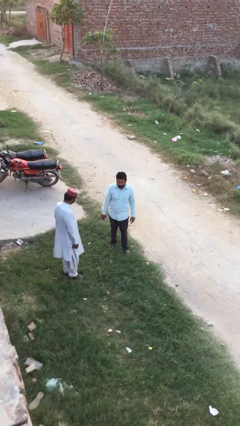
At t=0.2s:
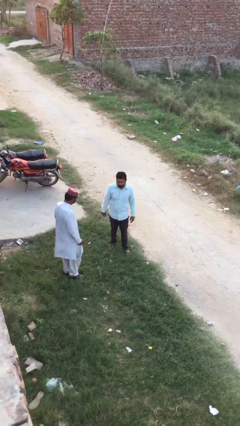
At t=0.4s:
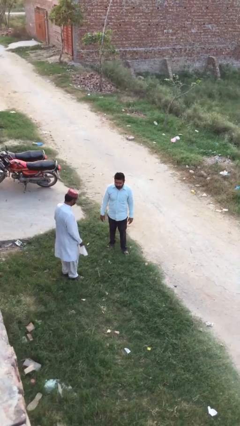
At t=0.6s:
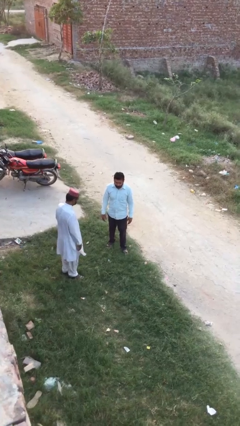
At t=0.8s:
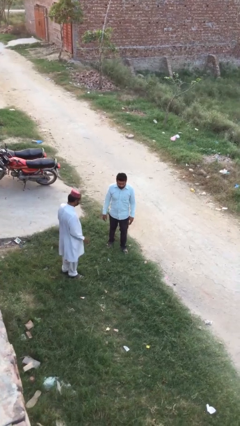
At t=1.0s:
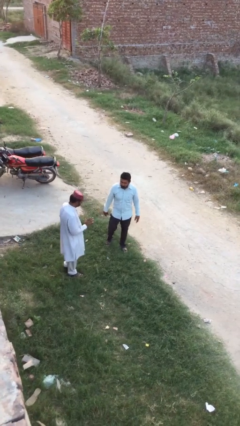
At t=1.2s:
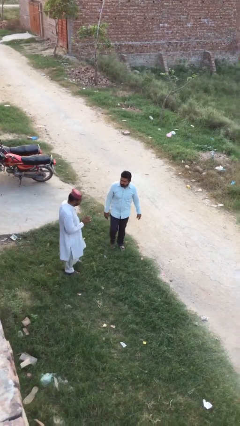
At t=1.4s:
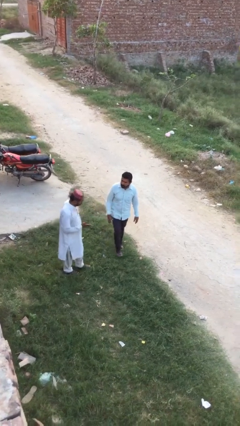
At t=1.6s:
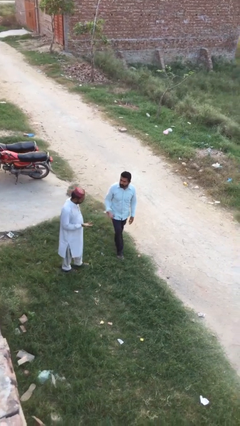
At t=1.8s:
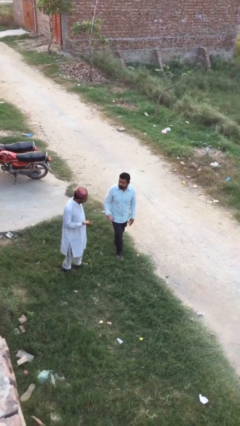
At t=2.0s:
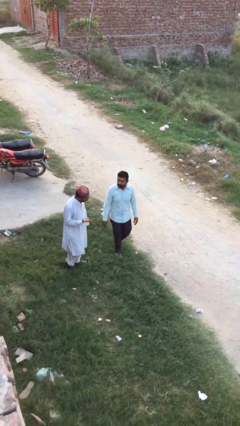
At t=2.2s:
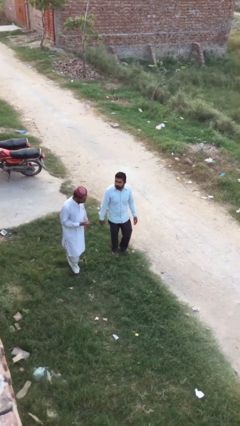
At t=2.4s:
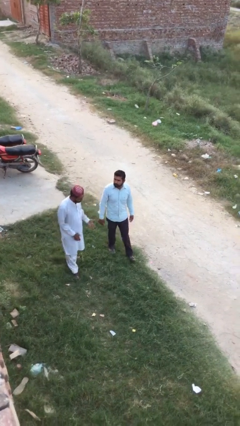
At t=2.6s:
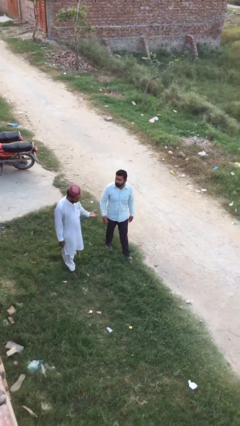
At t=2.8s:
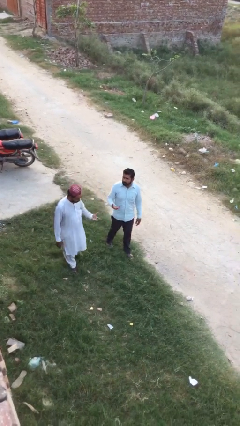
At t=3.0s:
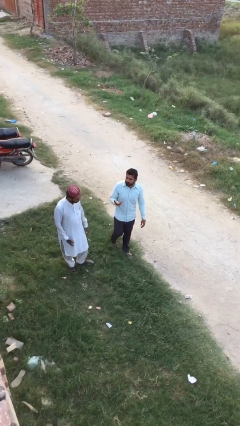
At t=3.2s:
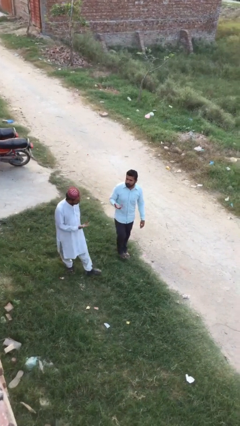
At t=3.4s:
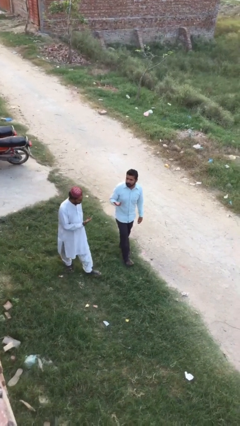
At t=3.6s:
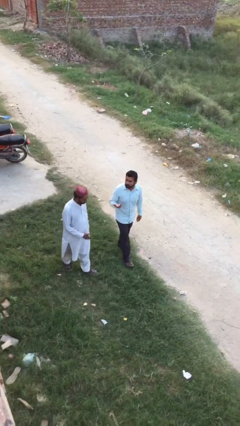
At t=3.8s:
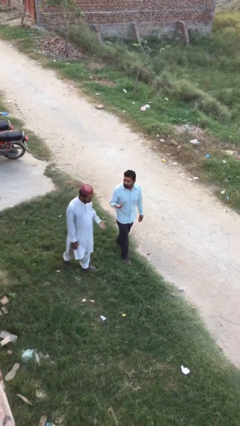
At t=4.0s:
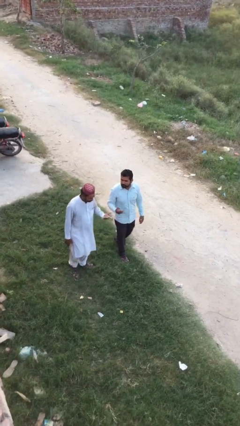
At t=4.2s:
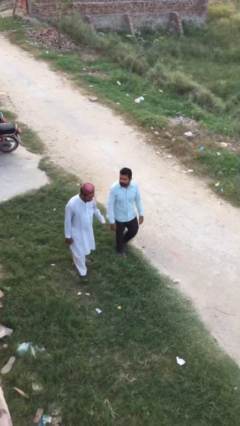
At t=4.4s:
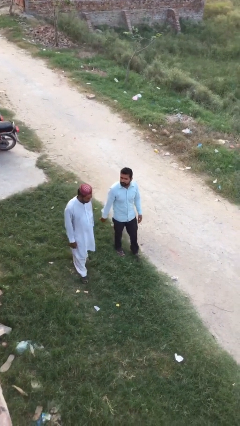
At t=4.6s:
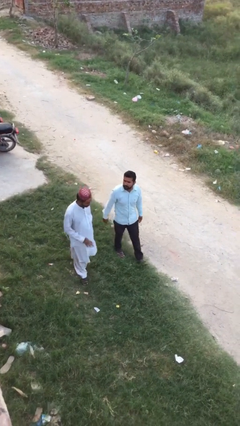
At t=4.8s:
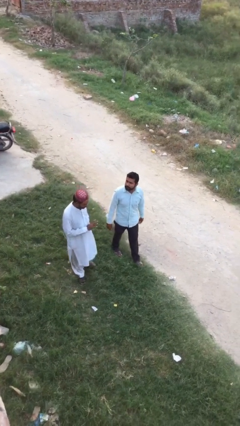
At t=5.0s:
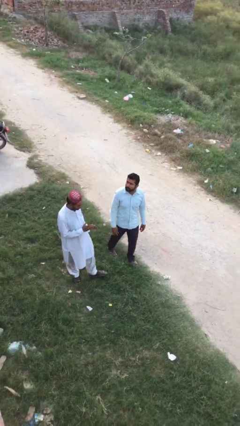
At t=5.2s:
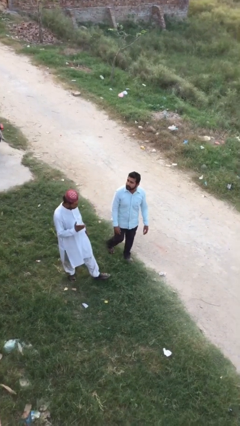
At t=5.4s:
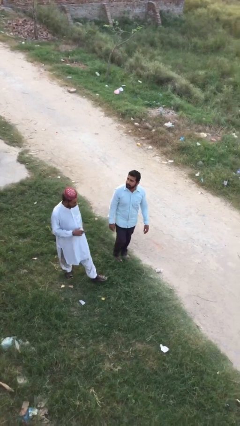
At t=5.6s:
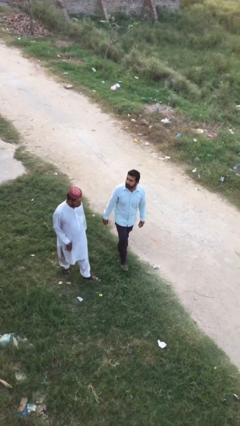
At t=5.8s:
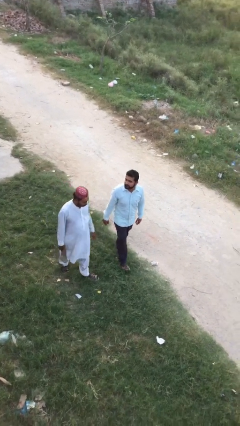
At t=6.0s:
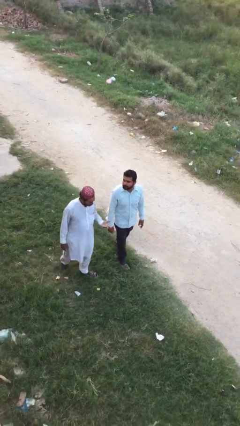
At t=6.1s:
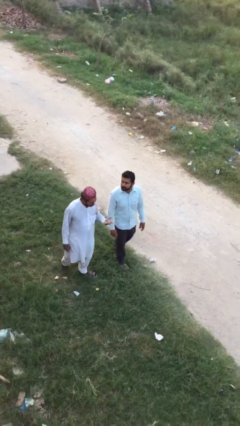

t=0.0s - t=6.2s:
person talks to person

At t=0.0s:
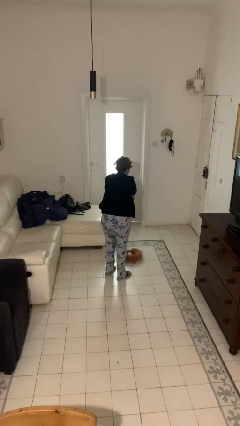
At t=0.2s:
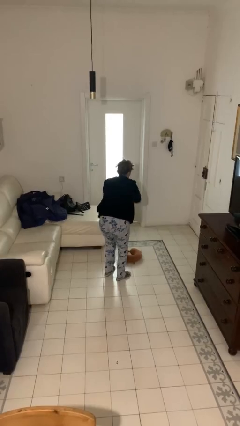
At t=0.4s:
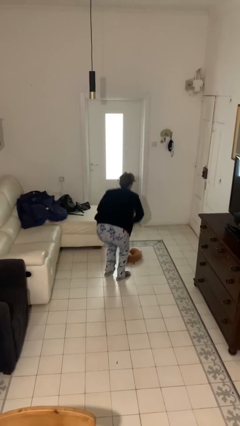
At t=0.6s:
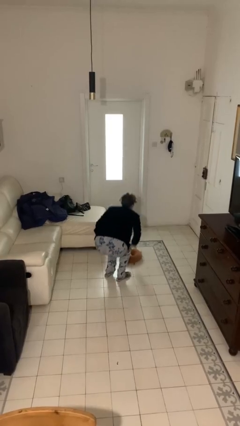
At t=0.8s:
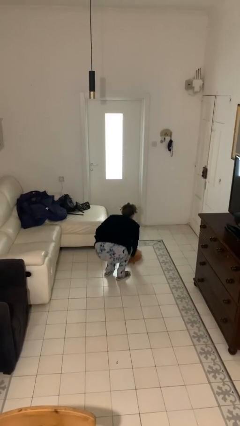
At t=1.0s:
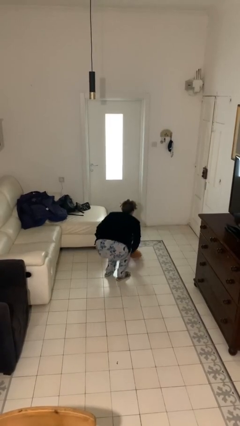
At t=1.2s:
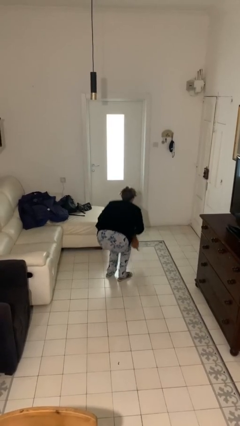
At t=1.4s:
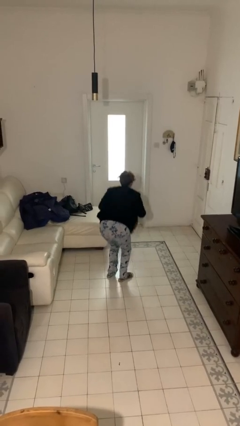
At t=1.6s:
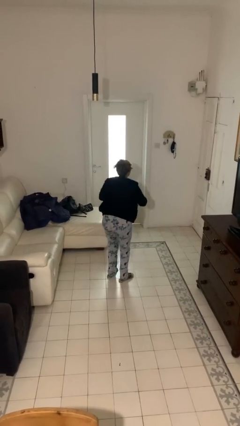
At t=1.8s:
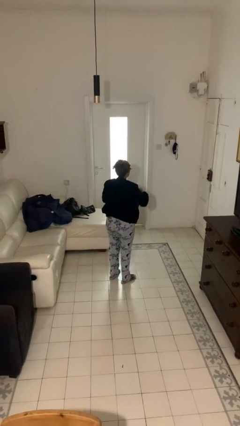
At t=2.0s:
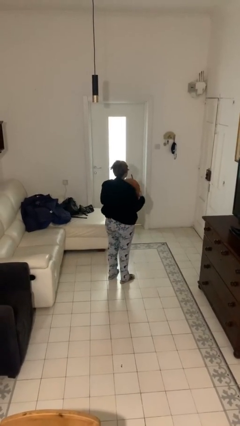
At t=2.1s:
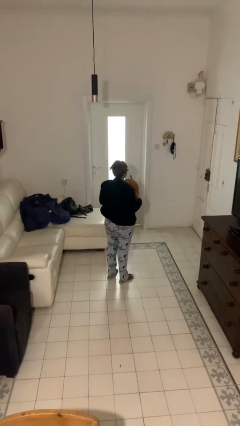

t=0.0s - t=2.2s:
person picks up object from floor

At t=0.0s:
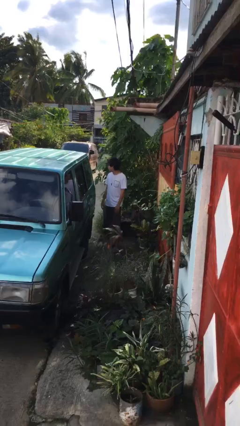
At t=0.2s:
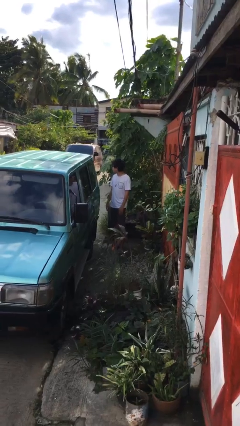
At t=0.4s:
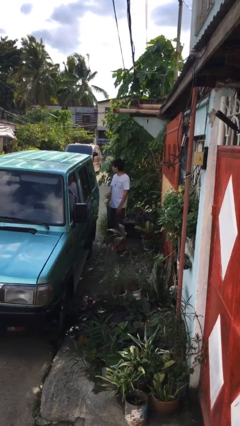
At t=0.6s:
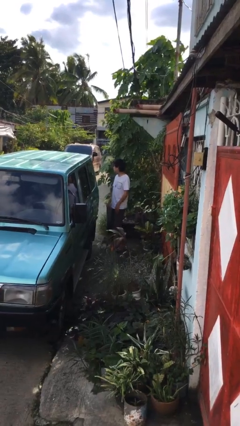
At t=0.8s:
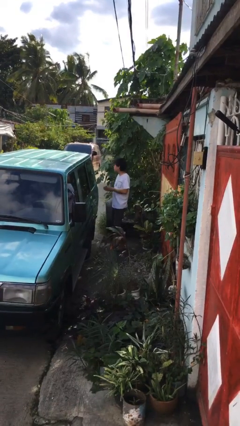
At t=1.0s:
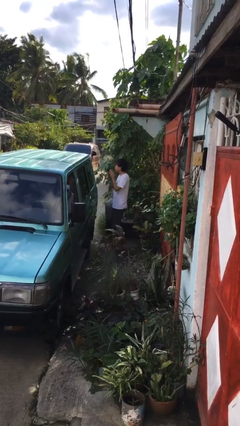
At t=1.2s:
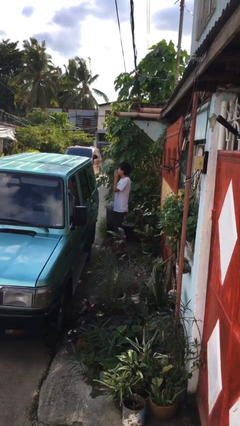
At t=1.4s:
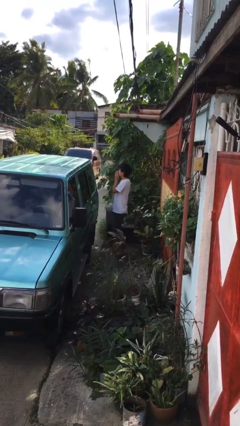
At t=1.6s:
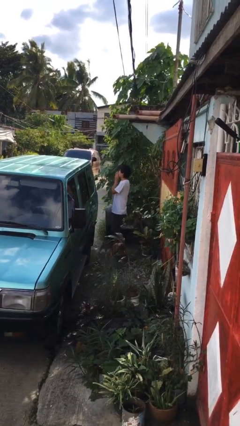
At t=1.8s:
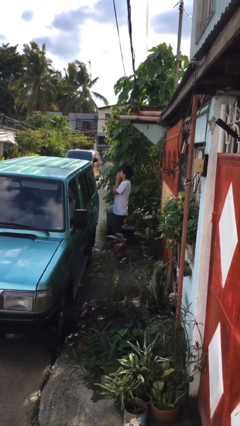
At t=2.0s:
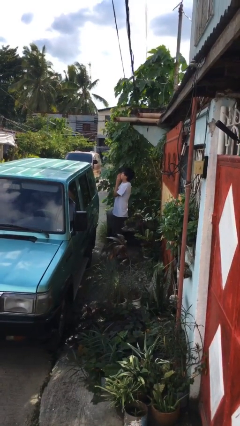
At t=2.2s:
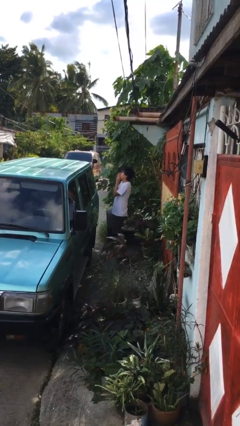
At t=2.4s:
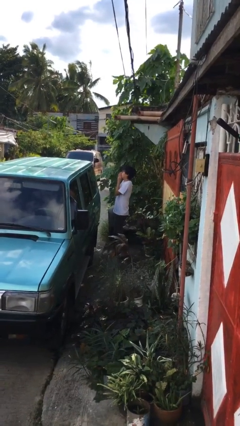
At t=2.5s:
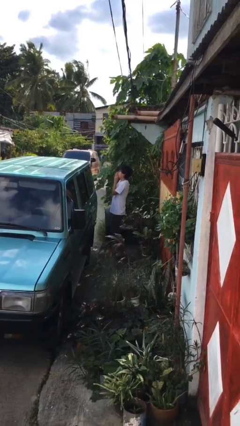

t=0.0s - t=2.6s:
person blows into hands

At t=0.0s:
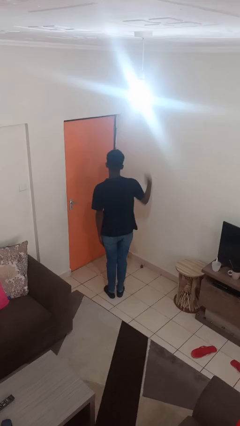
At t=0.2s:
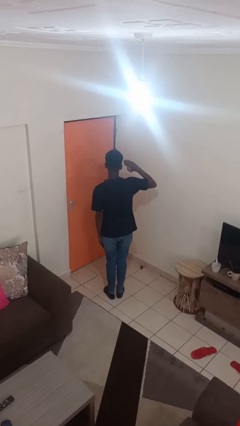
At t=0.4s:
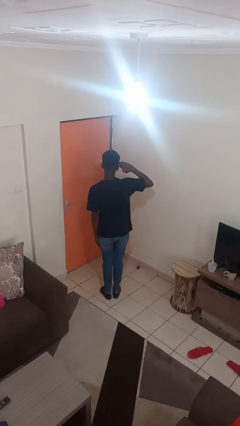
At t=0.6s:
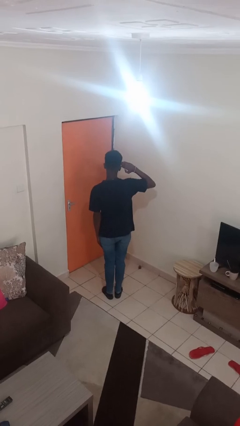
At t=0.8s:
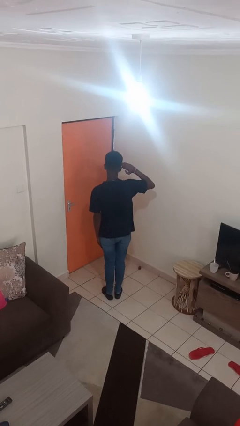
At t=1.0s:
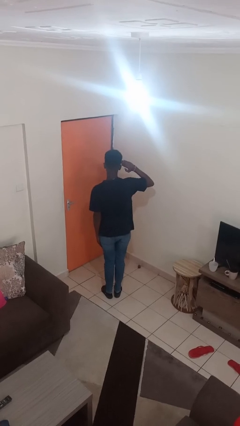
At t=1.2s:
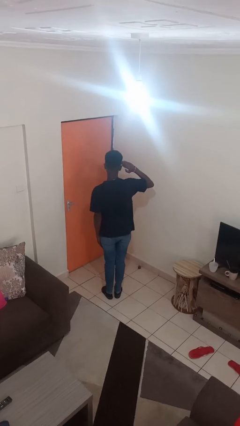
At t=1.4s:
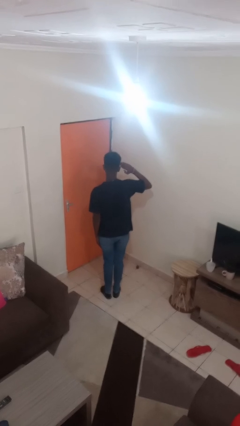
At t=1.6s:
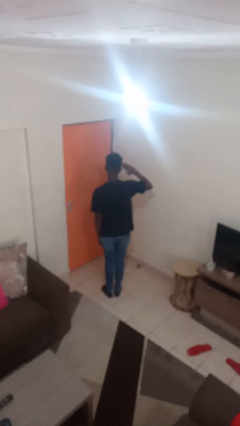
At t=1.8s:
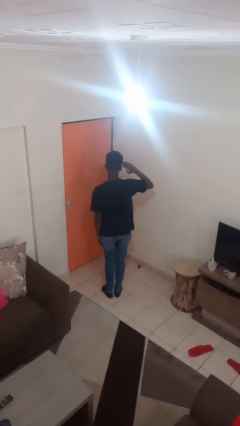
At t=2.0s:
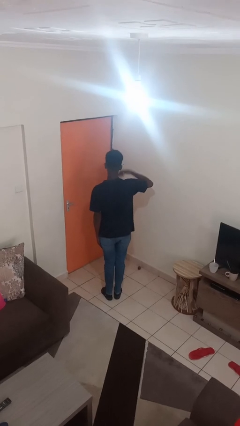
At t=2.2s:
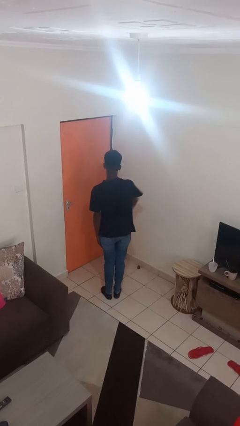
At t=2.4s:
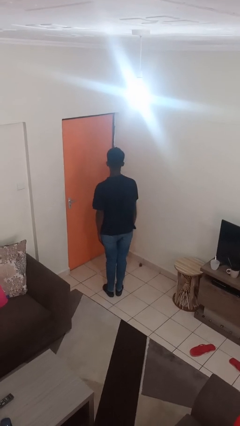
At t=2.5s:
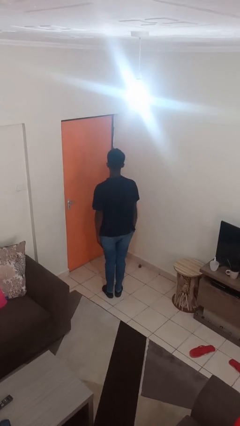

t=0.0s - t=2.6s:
person salutes

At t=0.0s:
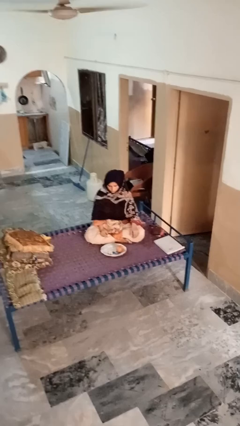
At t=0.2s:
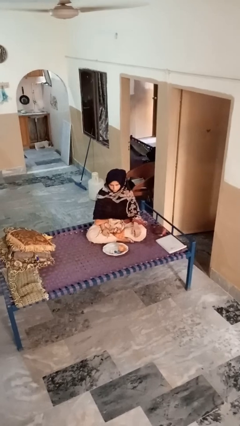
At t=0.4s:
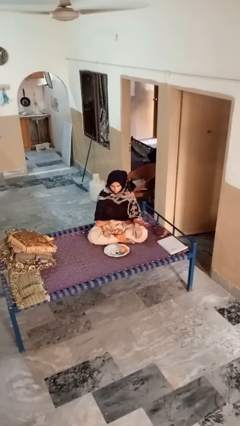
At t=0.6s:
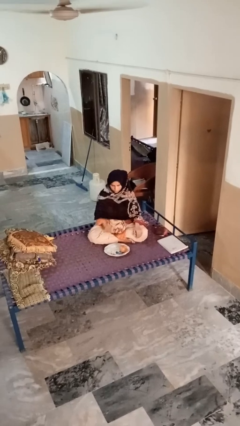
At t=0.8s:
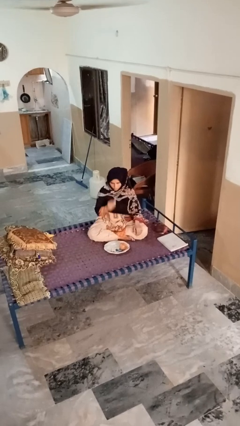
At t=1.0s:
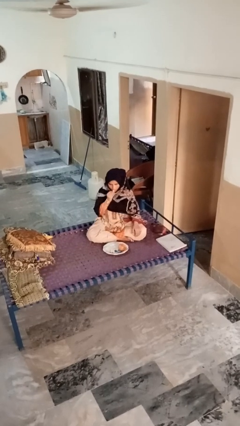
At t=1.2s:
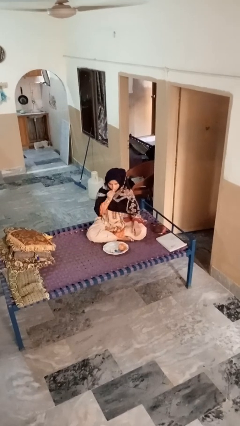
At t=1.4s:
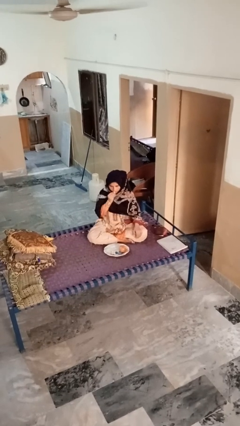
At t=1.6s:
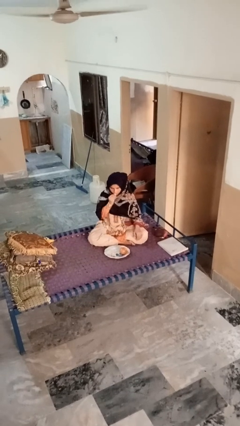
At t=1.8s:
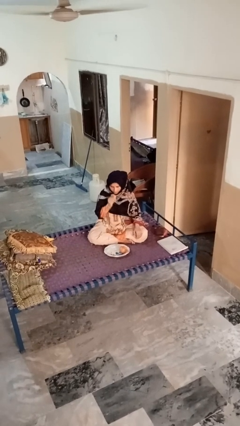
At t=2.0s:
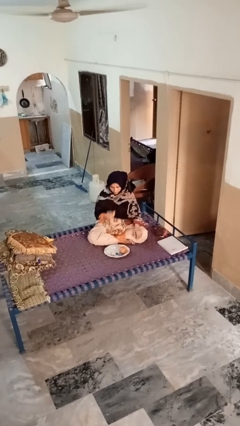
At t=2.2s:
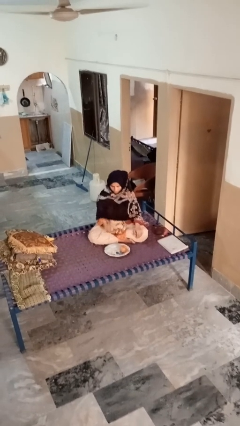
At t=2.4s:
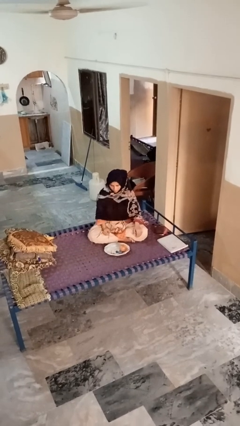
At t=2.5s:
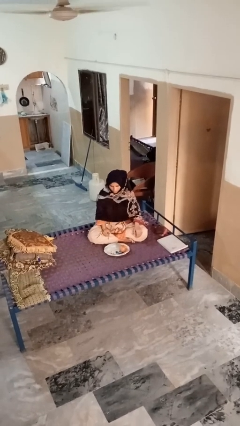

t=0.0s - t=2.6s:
person eats apple

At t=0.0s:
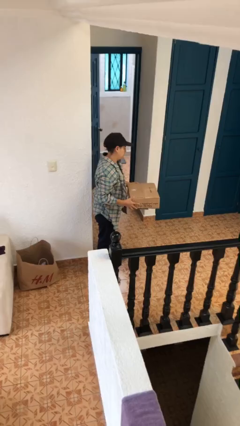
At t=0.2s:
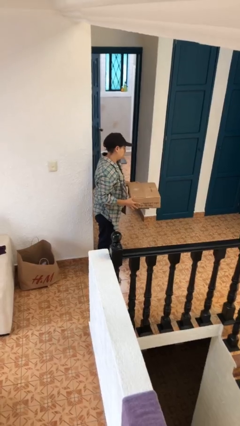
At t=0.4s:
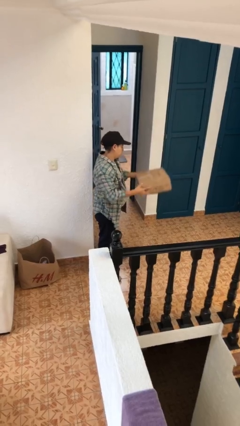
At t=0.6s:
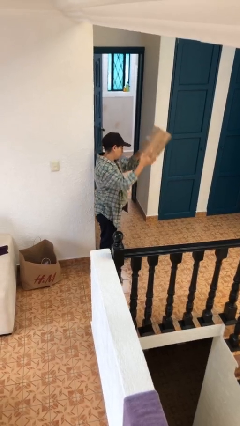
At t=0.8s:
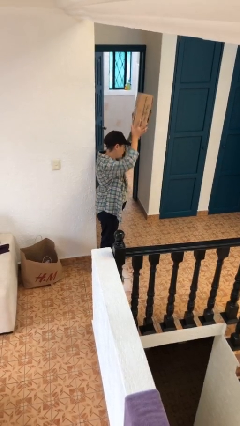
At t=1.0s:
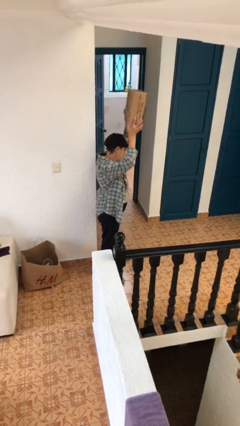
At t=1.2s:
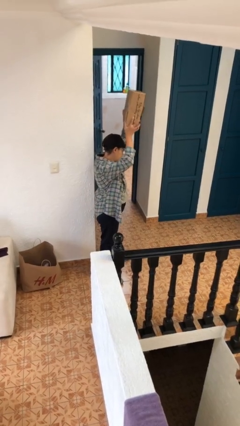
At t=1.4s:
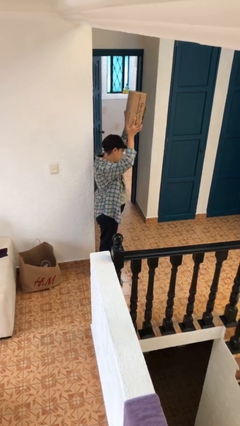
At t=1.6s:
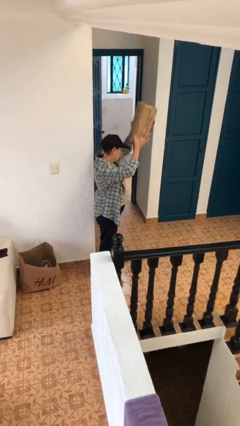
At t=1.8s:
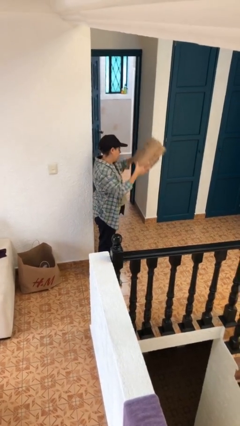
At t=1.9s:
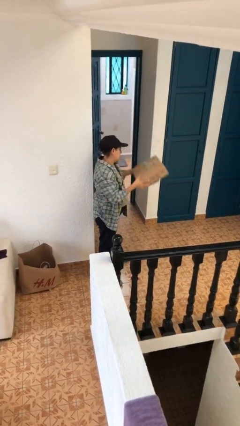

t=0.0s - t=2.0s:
person holds object above head
